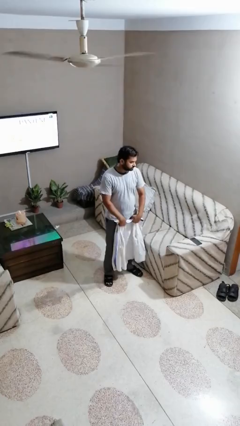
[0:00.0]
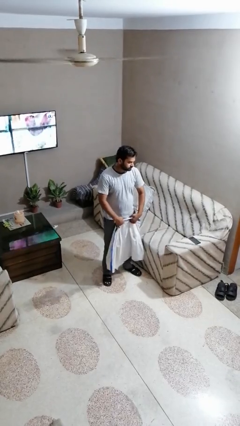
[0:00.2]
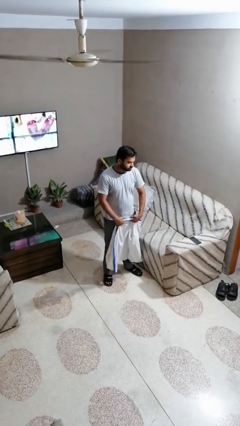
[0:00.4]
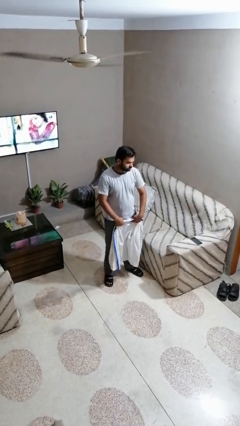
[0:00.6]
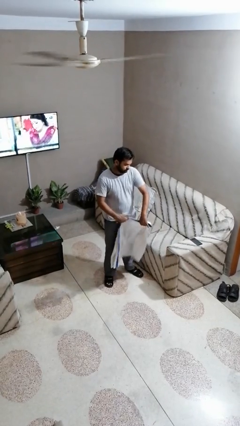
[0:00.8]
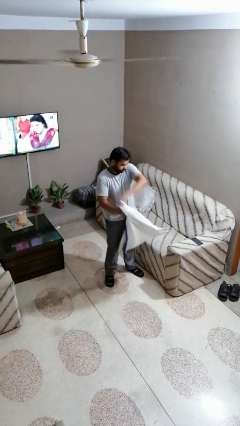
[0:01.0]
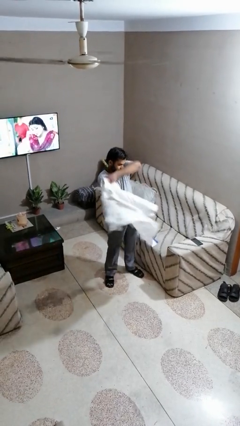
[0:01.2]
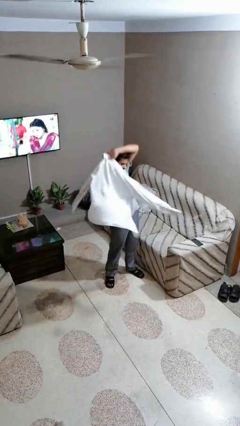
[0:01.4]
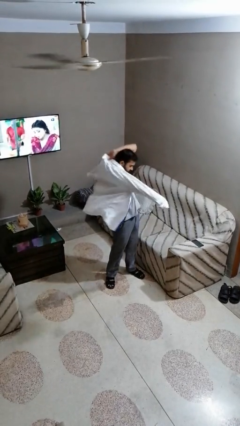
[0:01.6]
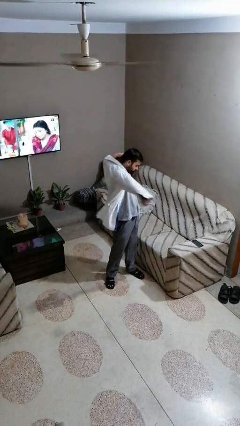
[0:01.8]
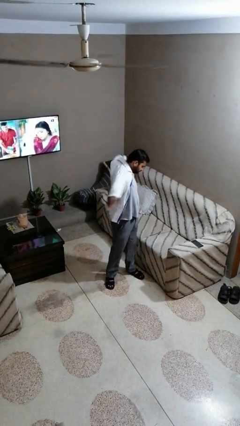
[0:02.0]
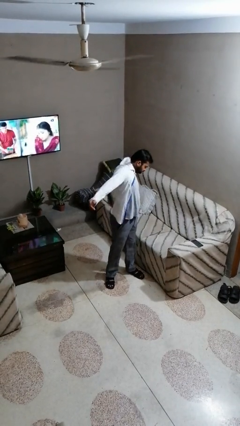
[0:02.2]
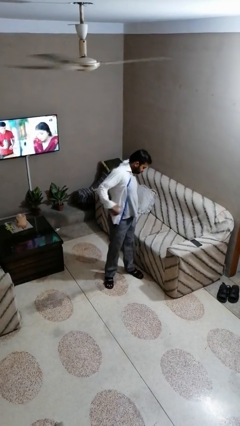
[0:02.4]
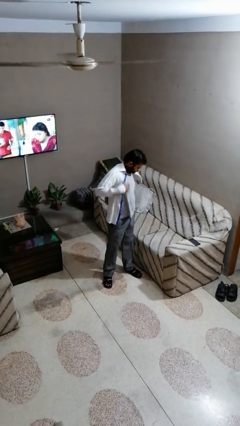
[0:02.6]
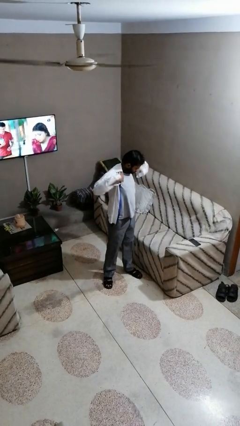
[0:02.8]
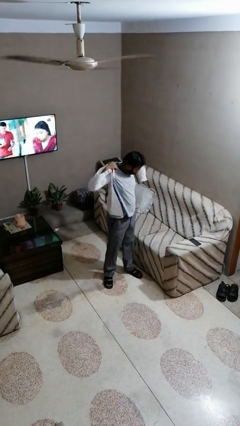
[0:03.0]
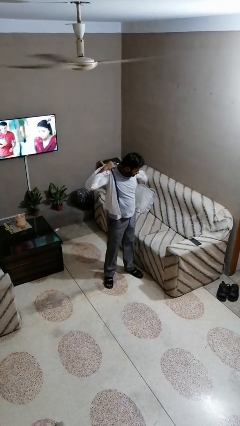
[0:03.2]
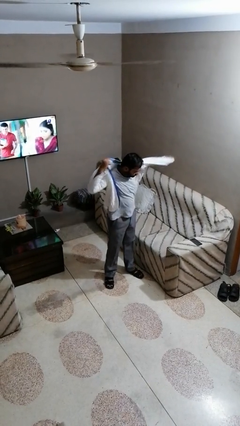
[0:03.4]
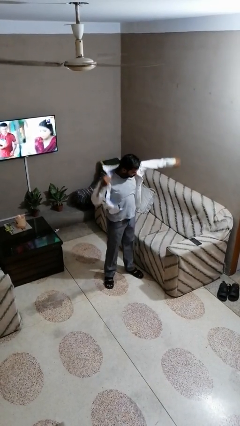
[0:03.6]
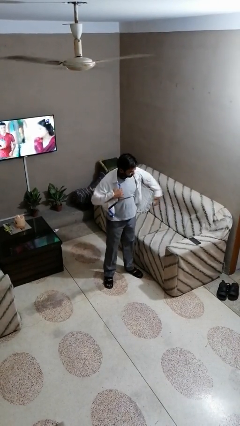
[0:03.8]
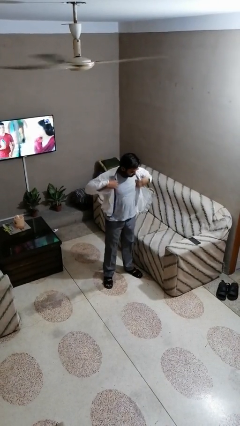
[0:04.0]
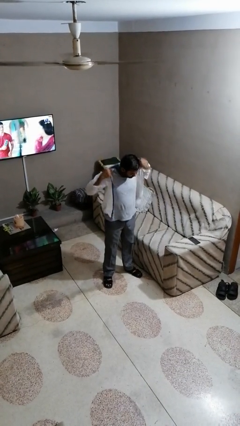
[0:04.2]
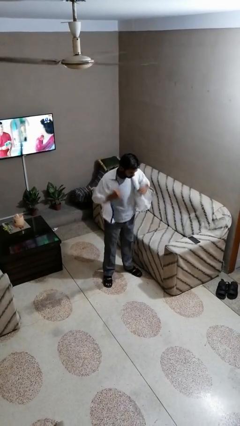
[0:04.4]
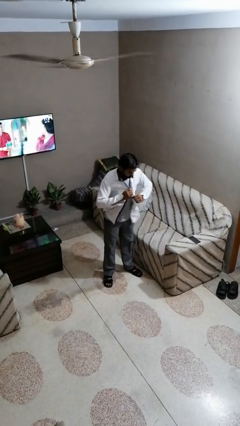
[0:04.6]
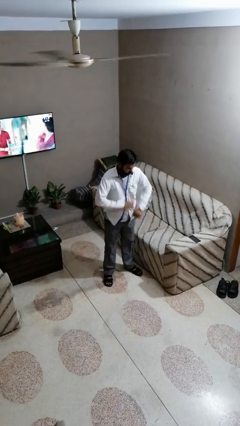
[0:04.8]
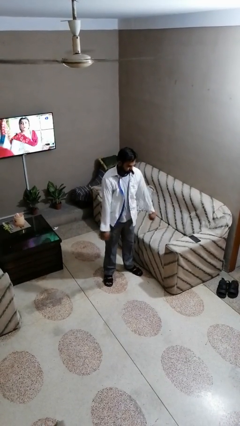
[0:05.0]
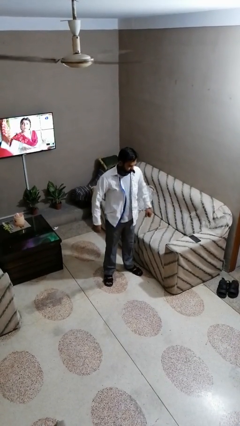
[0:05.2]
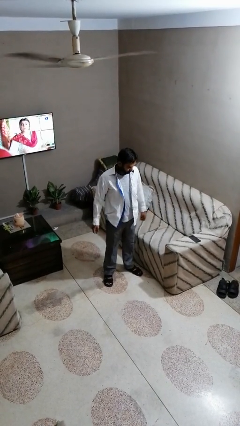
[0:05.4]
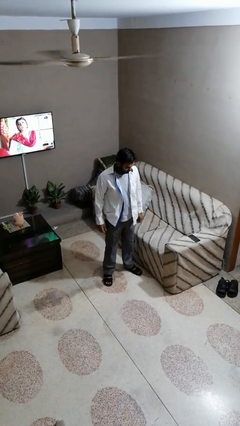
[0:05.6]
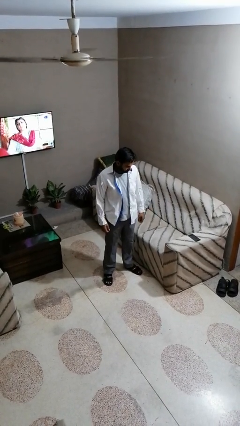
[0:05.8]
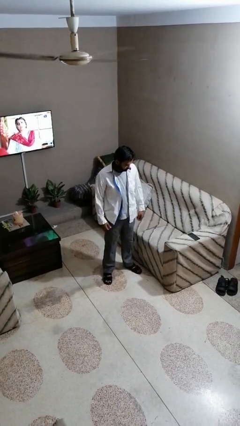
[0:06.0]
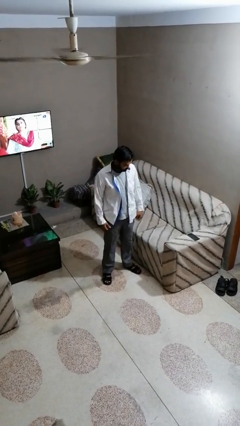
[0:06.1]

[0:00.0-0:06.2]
person puts on shirt

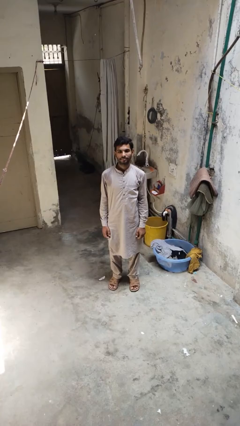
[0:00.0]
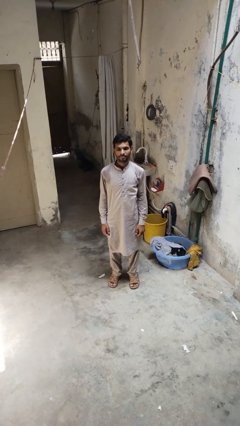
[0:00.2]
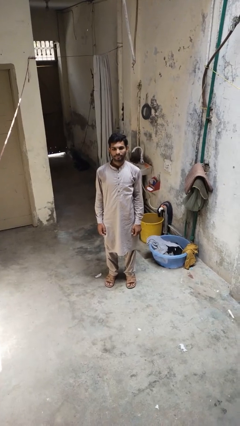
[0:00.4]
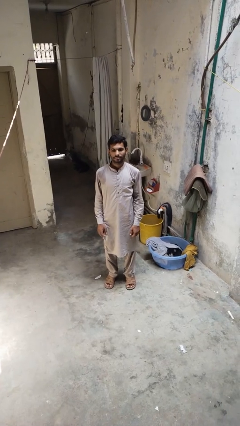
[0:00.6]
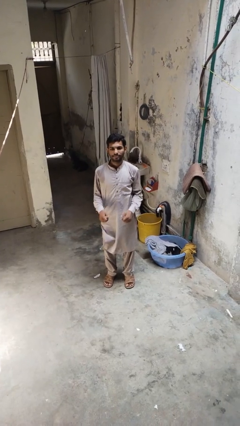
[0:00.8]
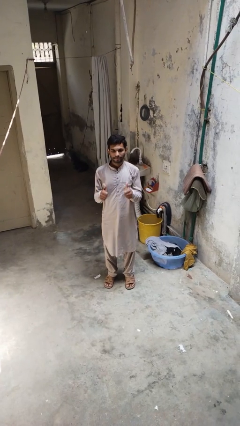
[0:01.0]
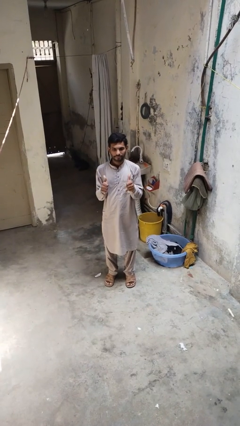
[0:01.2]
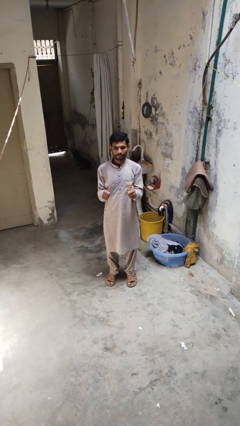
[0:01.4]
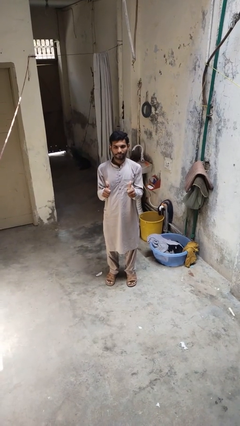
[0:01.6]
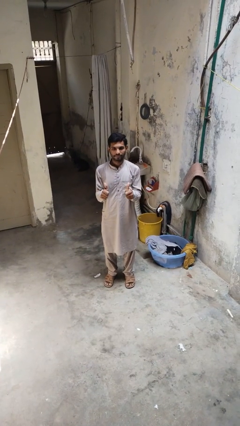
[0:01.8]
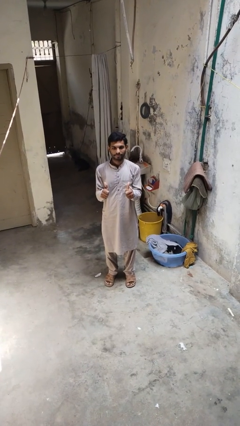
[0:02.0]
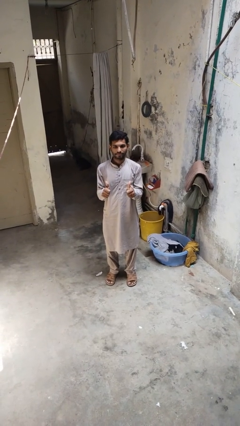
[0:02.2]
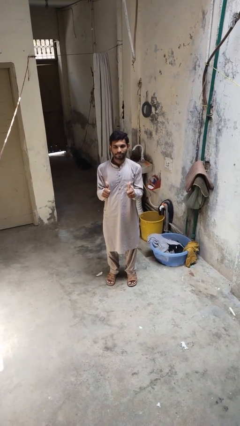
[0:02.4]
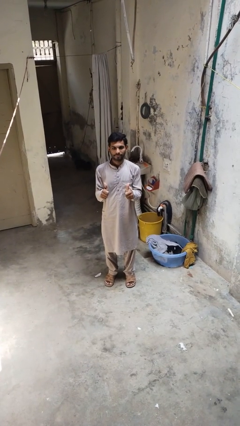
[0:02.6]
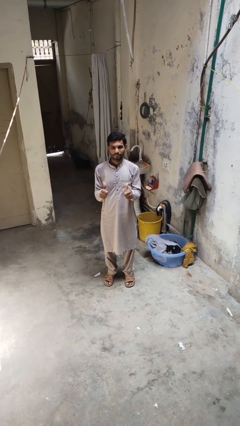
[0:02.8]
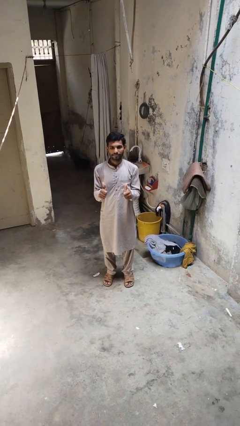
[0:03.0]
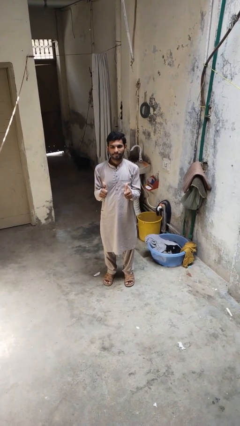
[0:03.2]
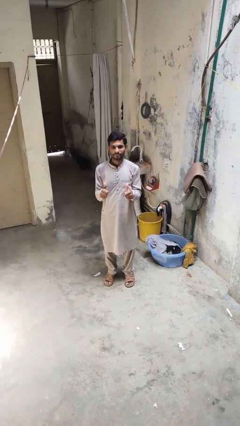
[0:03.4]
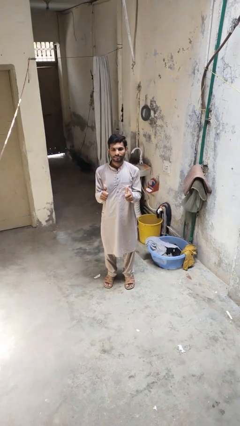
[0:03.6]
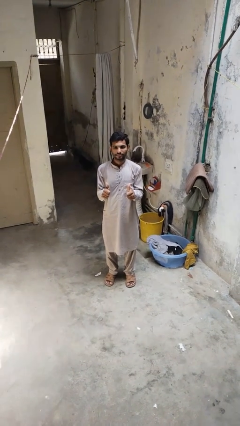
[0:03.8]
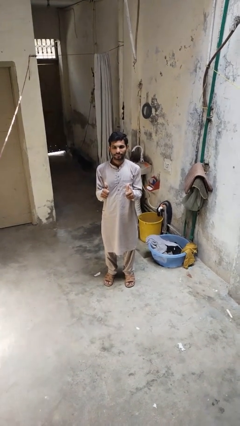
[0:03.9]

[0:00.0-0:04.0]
person gestures thumbs up

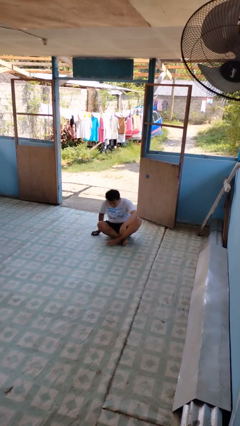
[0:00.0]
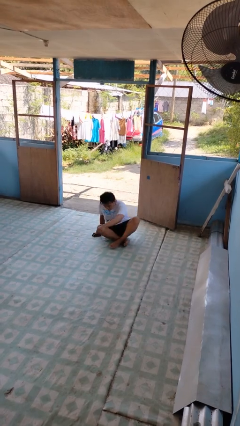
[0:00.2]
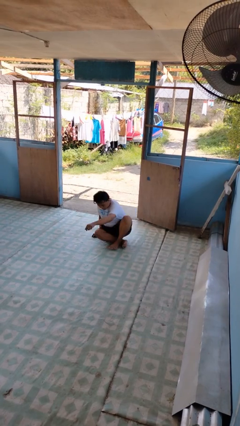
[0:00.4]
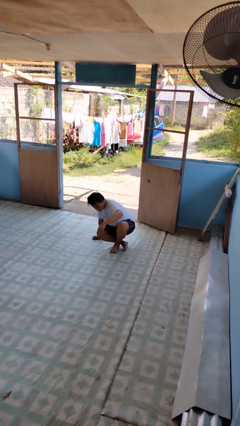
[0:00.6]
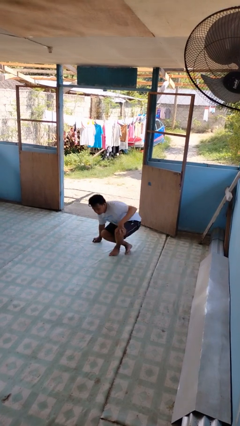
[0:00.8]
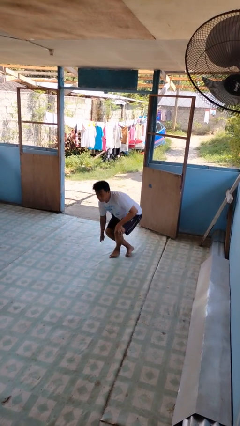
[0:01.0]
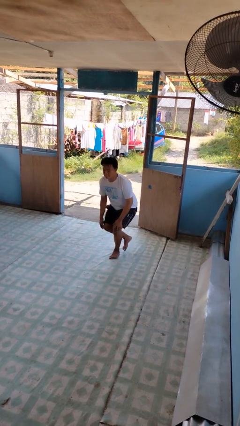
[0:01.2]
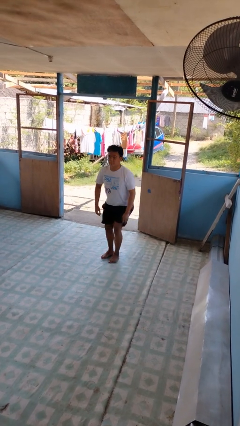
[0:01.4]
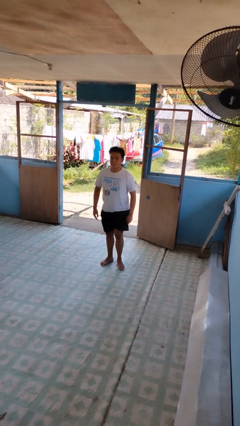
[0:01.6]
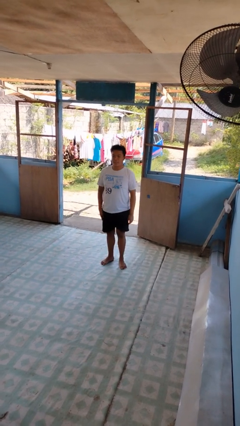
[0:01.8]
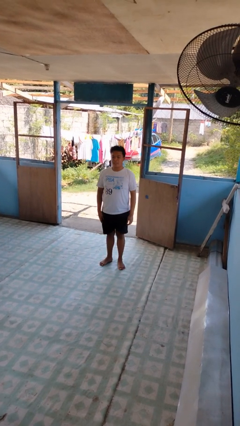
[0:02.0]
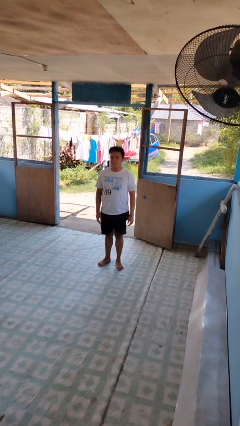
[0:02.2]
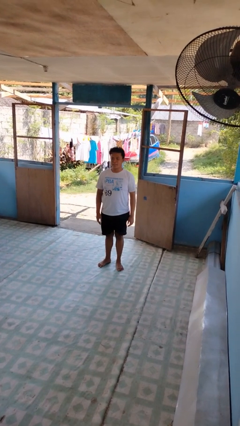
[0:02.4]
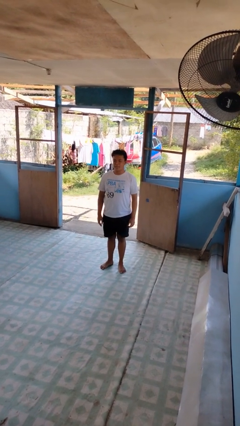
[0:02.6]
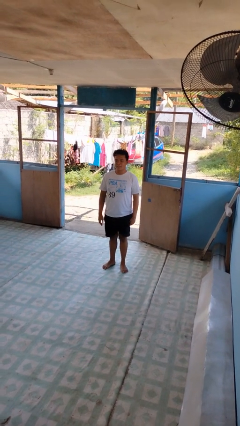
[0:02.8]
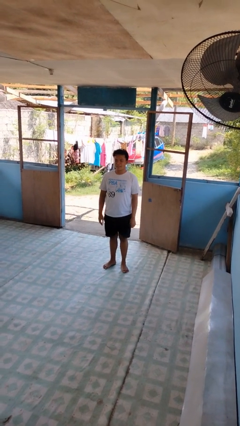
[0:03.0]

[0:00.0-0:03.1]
person stands up from floor

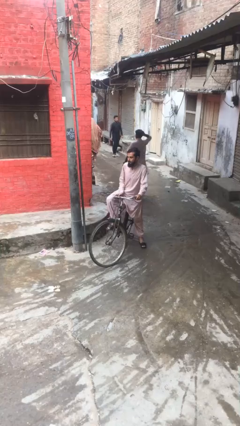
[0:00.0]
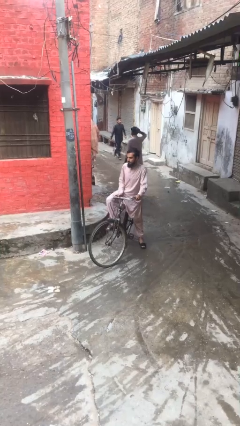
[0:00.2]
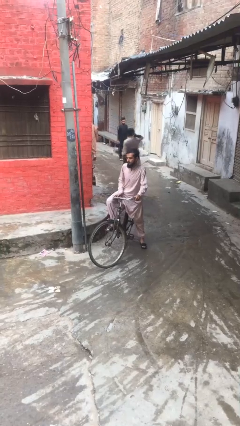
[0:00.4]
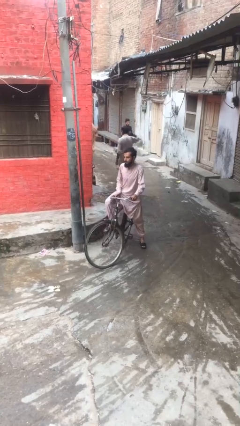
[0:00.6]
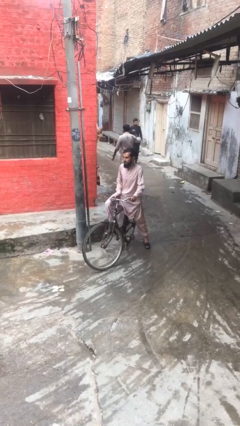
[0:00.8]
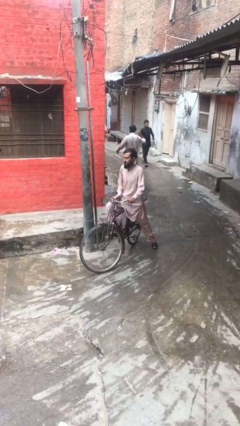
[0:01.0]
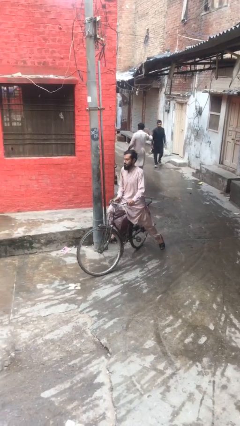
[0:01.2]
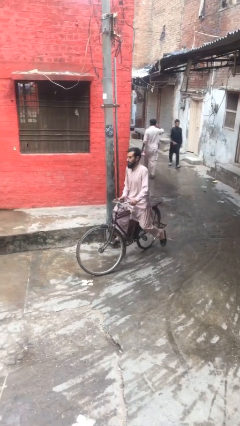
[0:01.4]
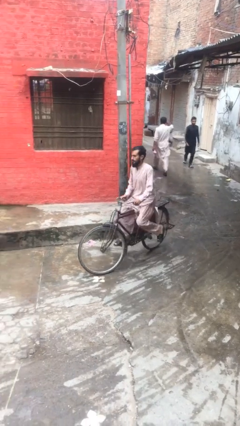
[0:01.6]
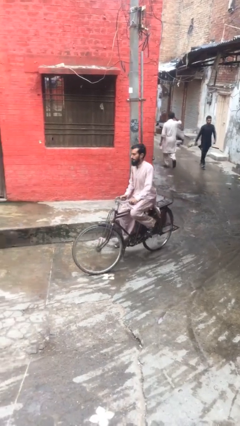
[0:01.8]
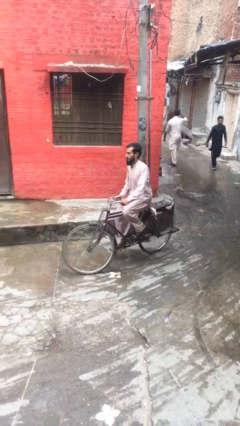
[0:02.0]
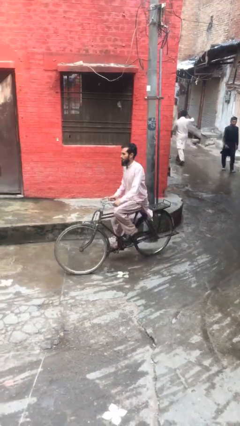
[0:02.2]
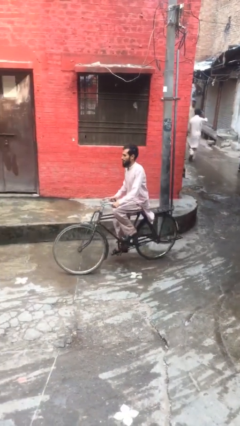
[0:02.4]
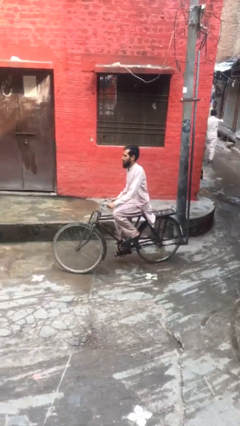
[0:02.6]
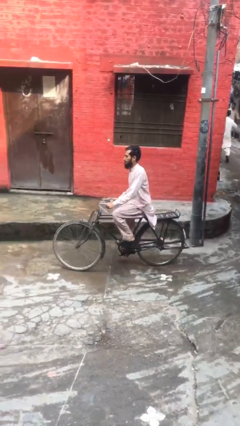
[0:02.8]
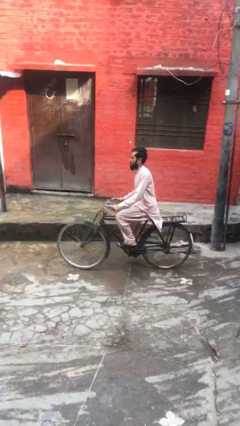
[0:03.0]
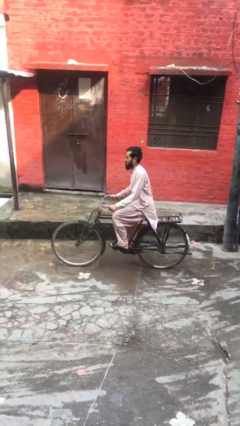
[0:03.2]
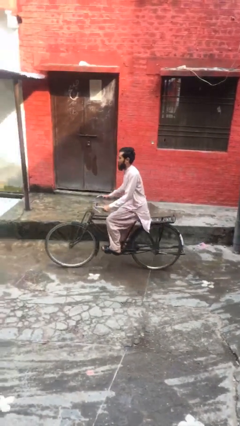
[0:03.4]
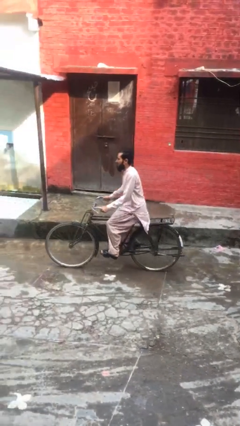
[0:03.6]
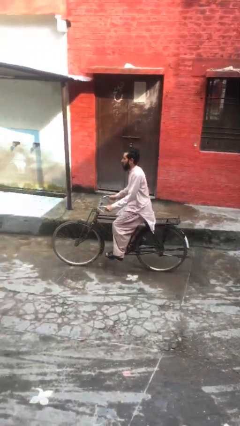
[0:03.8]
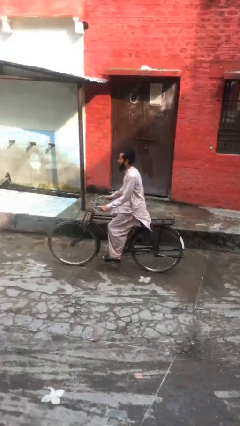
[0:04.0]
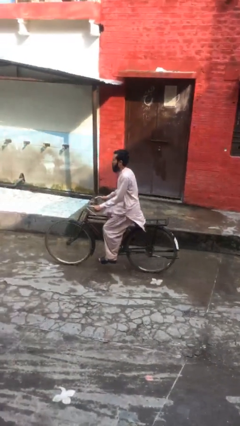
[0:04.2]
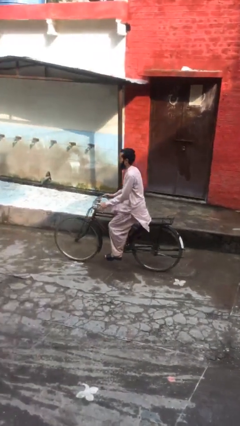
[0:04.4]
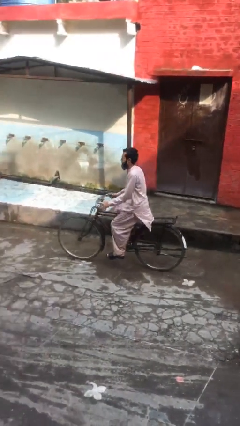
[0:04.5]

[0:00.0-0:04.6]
person rides bicycle
